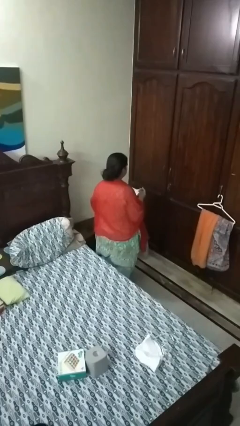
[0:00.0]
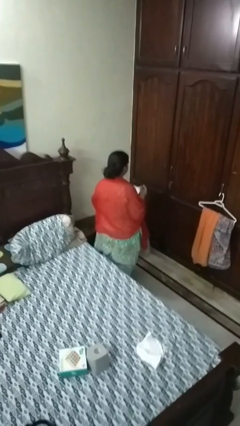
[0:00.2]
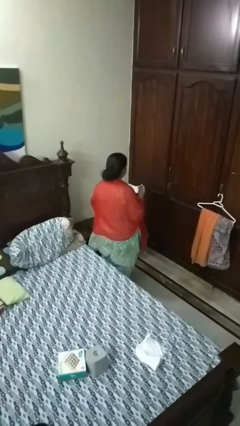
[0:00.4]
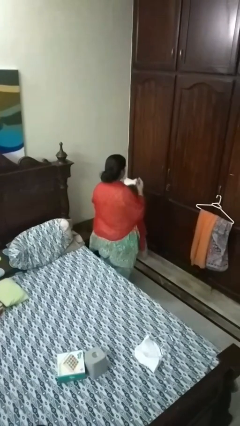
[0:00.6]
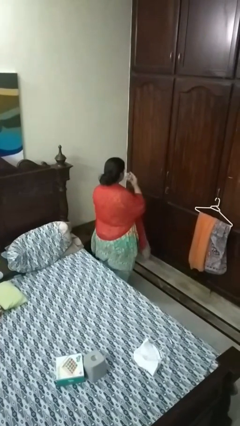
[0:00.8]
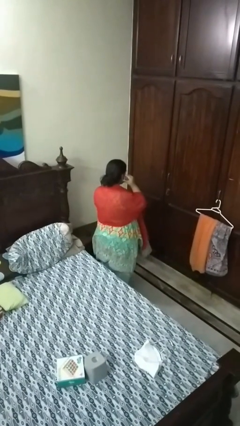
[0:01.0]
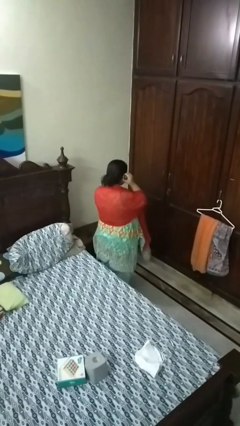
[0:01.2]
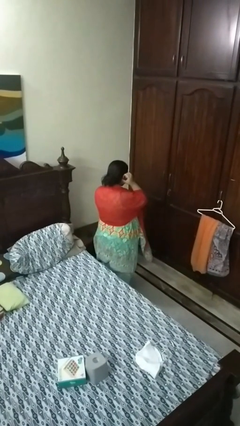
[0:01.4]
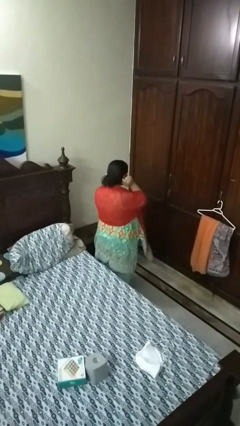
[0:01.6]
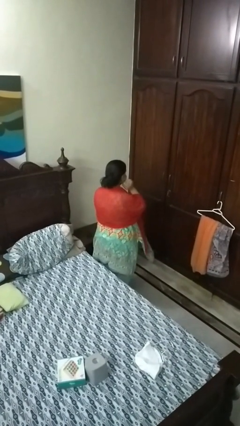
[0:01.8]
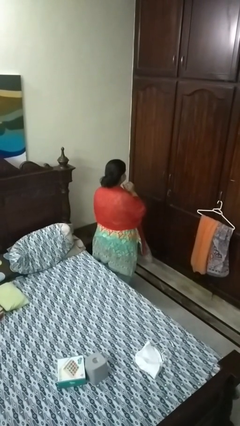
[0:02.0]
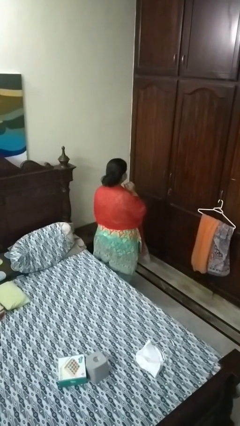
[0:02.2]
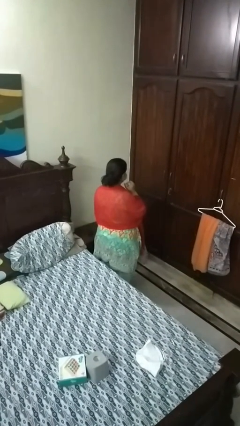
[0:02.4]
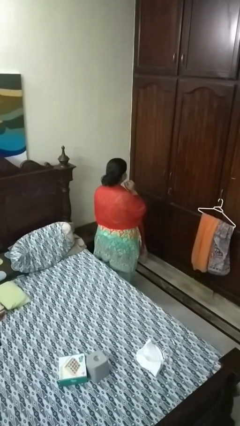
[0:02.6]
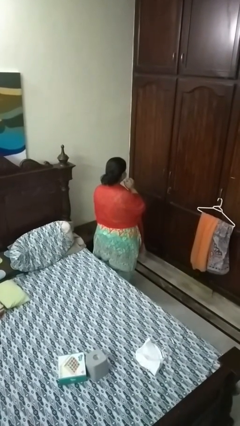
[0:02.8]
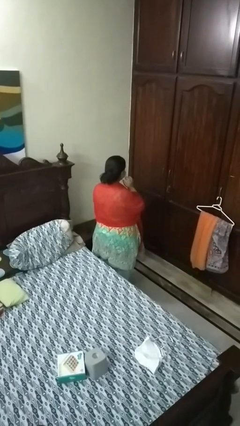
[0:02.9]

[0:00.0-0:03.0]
person puts on facemask

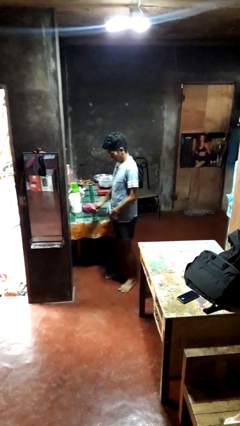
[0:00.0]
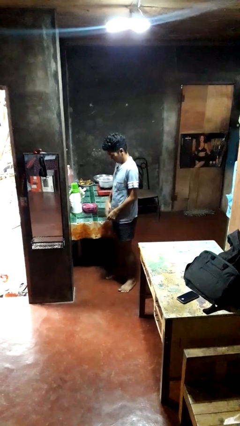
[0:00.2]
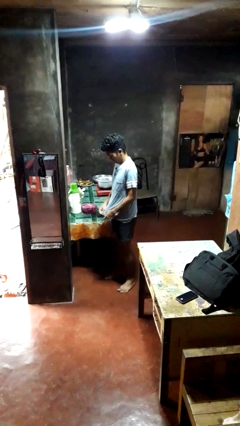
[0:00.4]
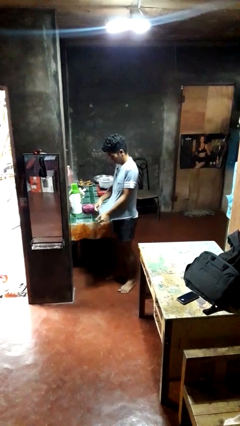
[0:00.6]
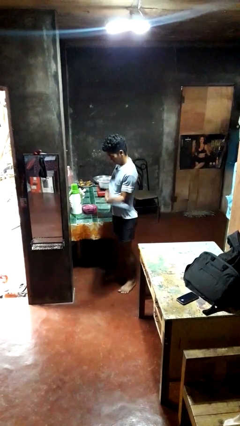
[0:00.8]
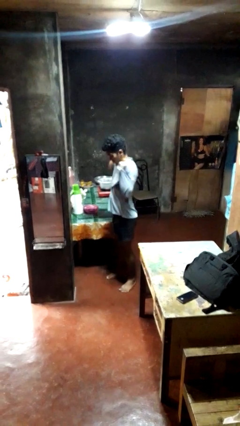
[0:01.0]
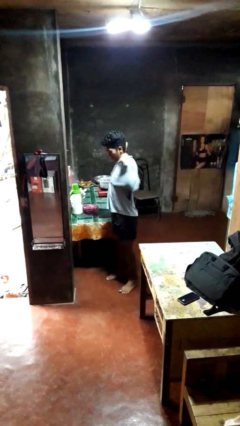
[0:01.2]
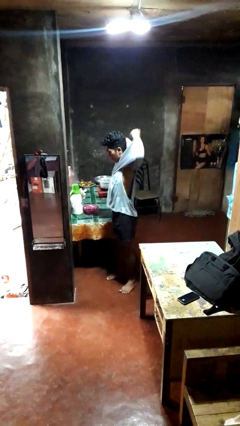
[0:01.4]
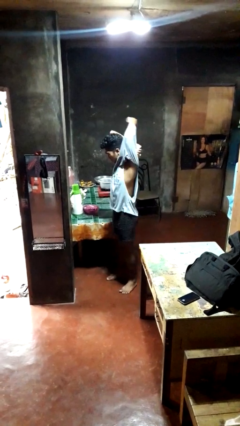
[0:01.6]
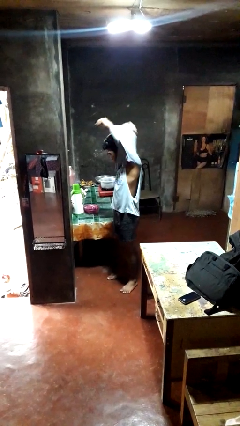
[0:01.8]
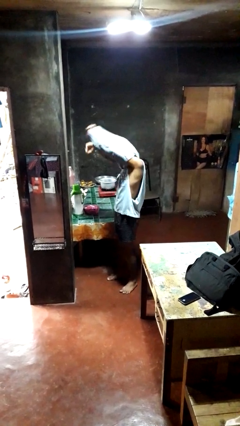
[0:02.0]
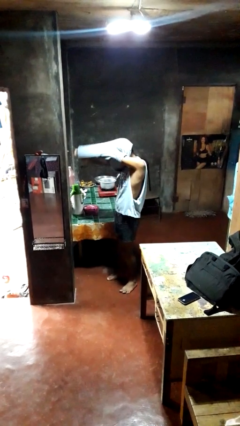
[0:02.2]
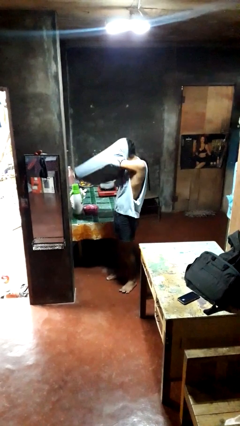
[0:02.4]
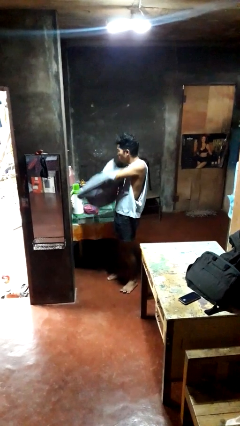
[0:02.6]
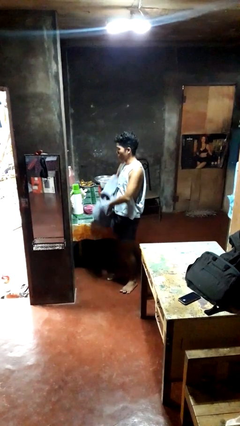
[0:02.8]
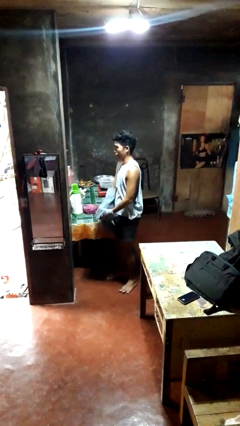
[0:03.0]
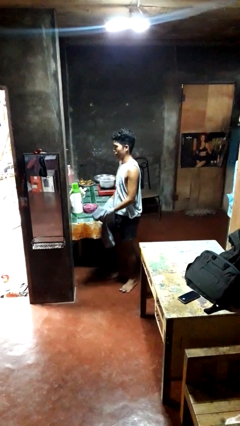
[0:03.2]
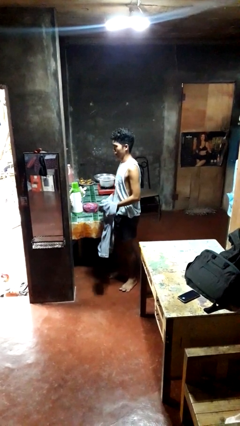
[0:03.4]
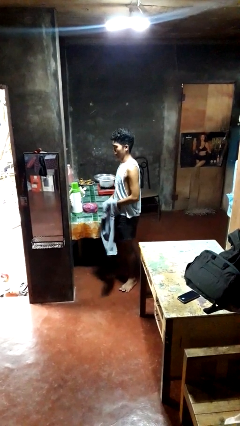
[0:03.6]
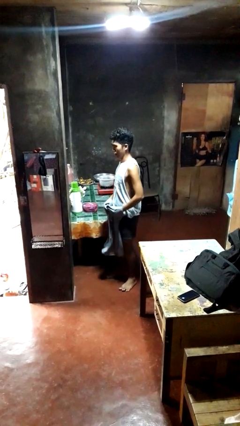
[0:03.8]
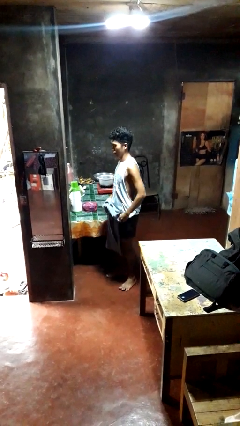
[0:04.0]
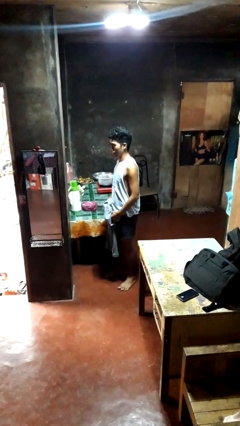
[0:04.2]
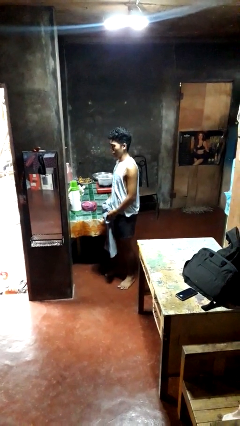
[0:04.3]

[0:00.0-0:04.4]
person takes off shirt

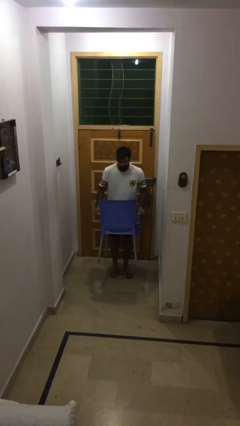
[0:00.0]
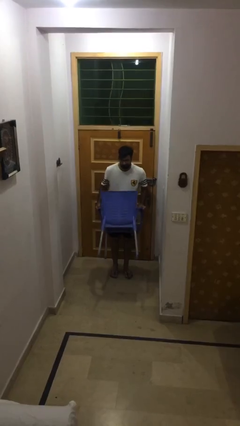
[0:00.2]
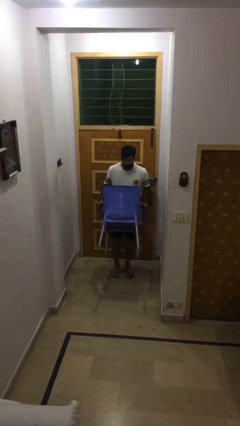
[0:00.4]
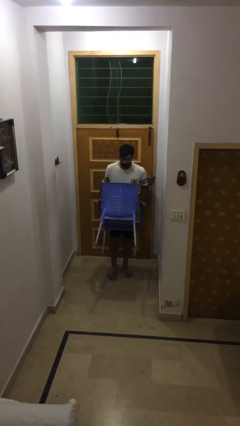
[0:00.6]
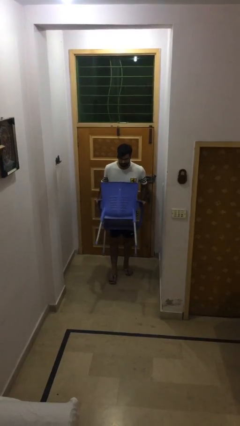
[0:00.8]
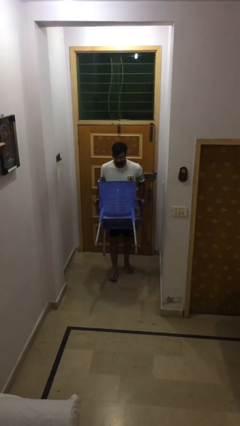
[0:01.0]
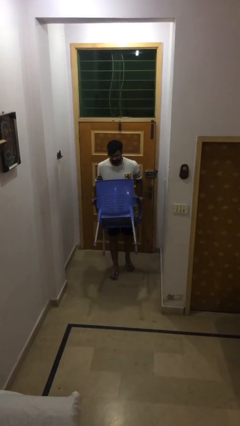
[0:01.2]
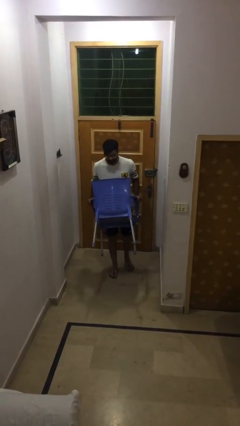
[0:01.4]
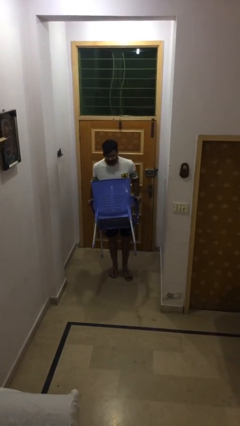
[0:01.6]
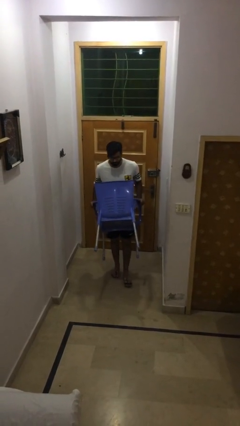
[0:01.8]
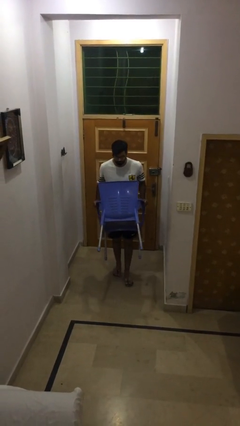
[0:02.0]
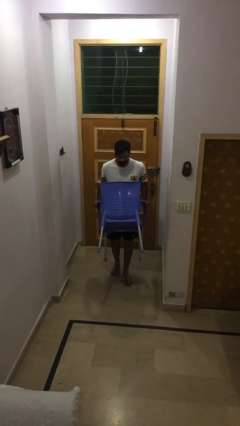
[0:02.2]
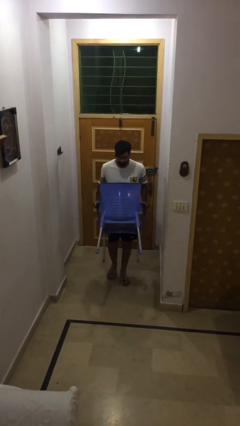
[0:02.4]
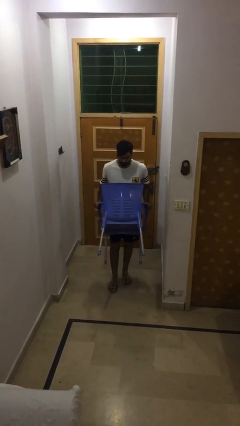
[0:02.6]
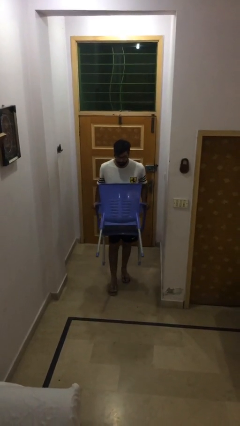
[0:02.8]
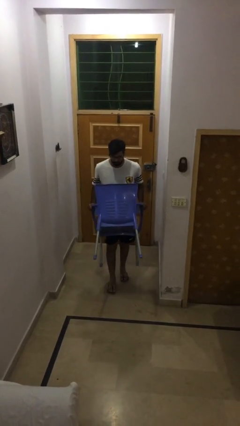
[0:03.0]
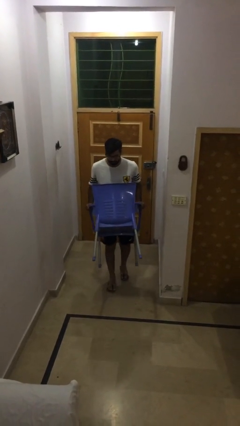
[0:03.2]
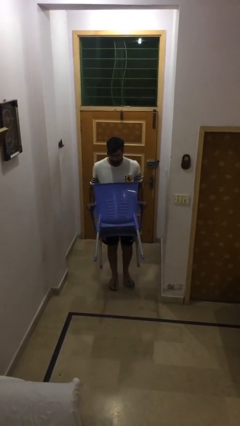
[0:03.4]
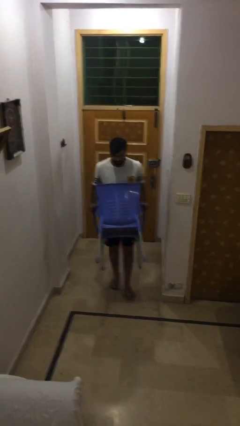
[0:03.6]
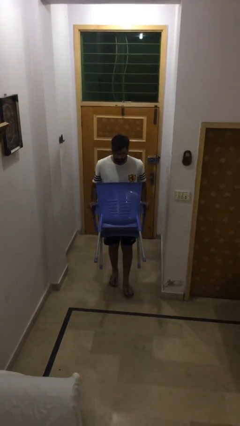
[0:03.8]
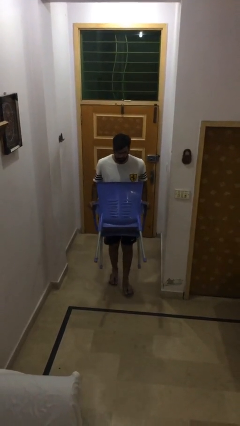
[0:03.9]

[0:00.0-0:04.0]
person carries heavy object

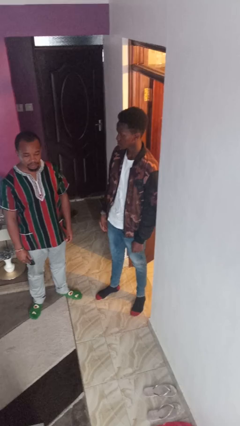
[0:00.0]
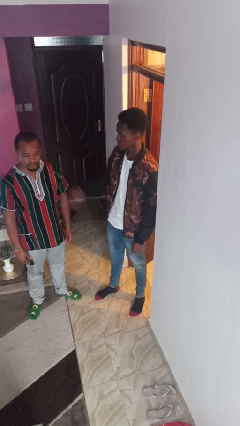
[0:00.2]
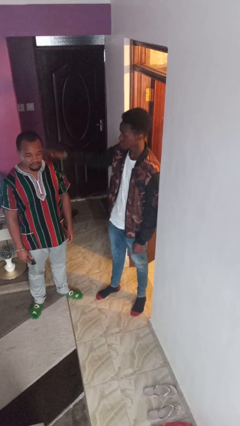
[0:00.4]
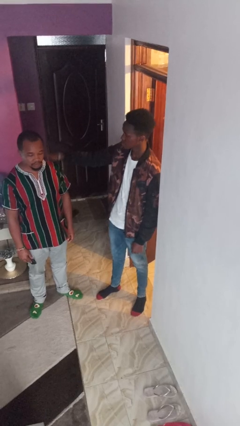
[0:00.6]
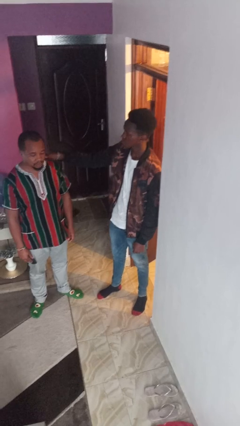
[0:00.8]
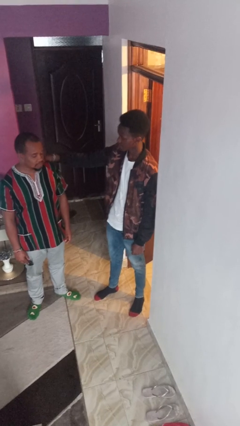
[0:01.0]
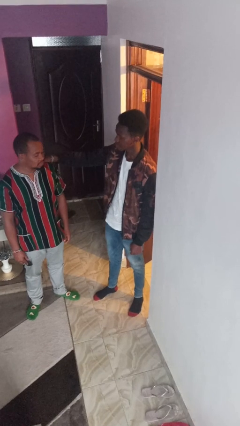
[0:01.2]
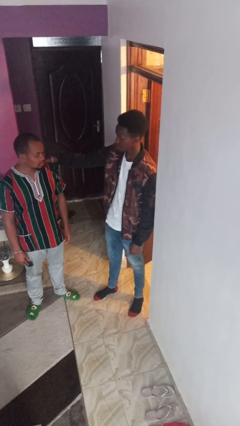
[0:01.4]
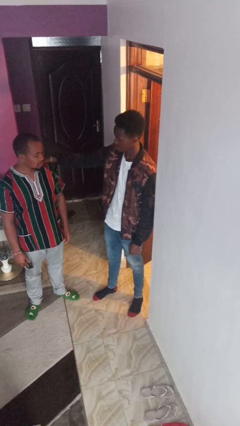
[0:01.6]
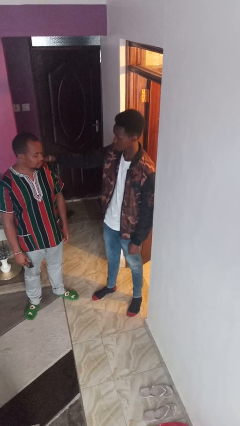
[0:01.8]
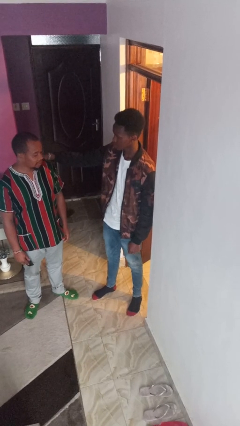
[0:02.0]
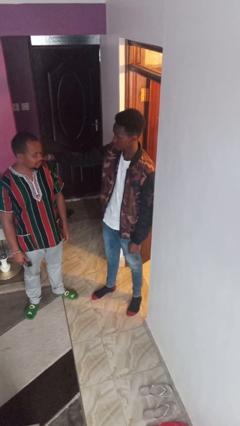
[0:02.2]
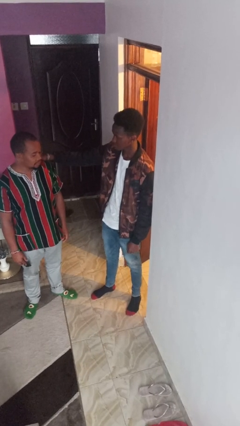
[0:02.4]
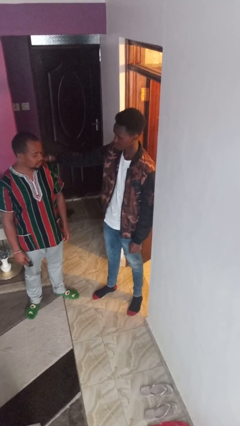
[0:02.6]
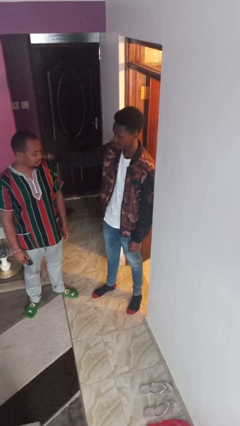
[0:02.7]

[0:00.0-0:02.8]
person pounds shoulders of person

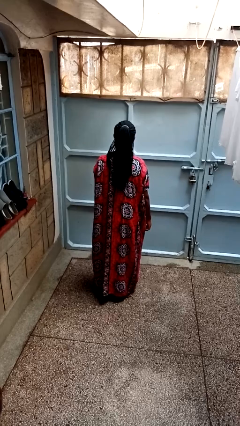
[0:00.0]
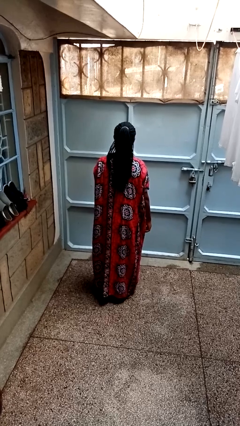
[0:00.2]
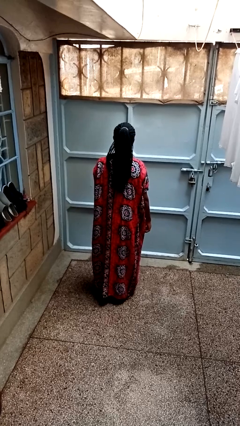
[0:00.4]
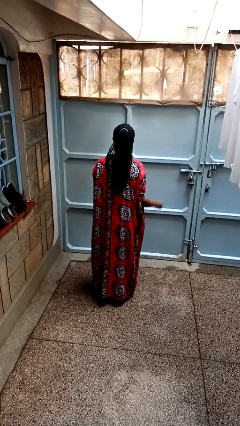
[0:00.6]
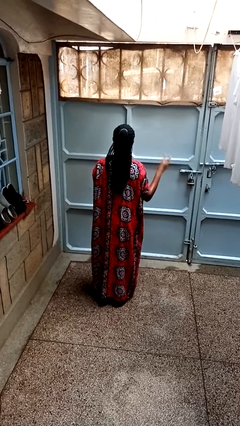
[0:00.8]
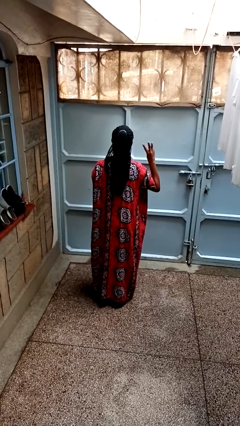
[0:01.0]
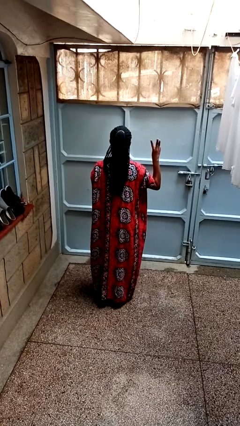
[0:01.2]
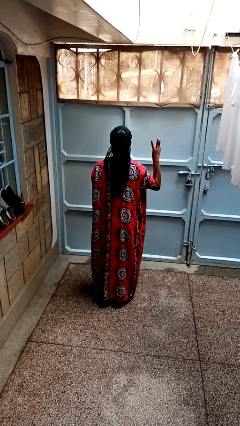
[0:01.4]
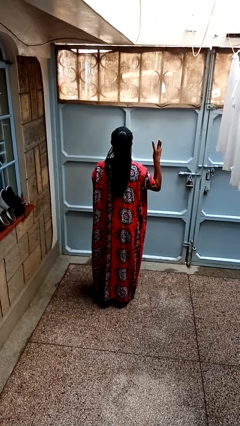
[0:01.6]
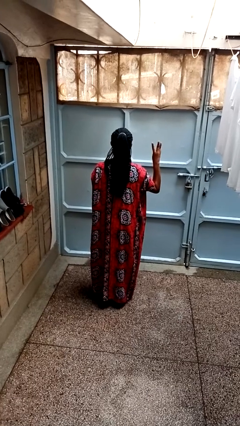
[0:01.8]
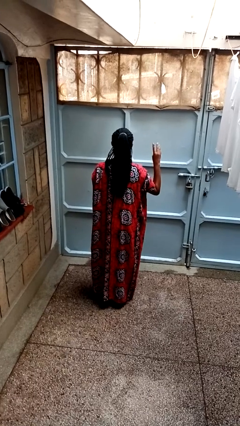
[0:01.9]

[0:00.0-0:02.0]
person gestures number three

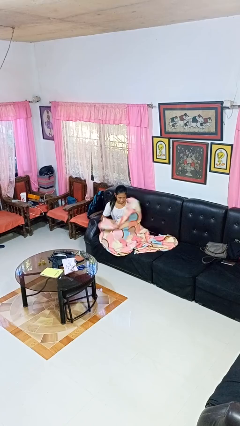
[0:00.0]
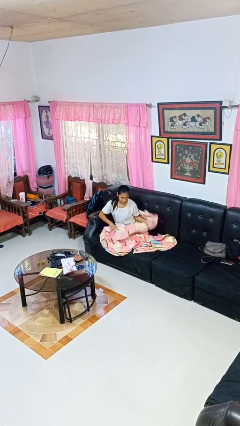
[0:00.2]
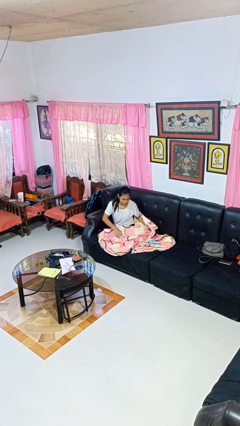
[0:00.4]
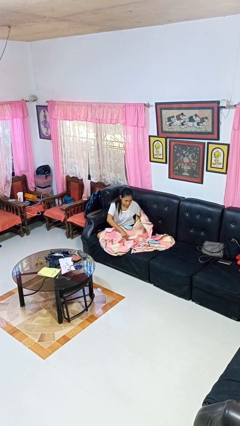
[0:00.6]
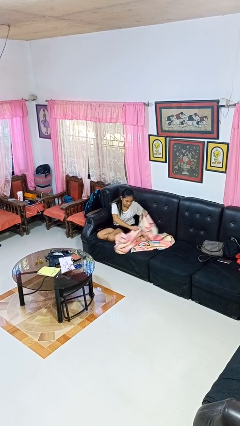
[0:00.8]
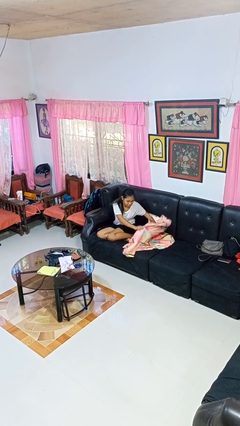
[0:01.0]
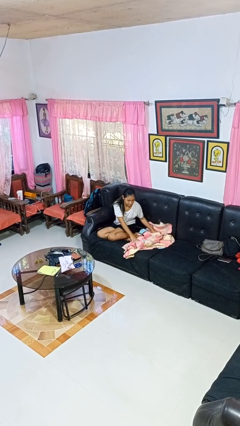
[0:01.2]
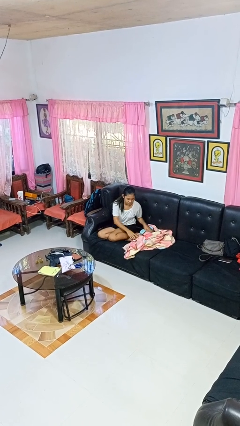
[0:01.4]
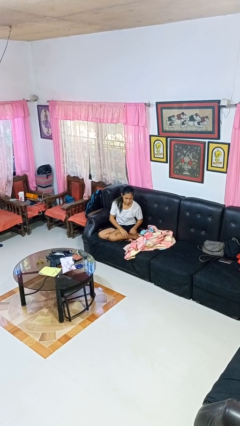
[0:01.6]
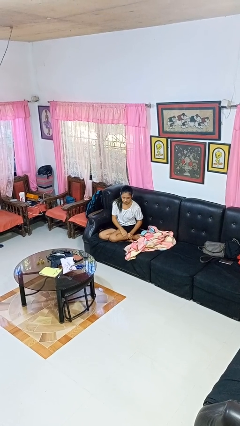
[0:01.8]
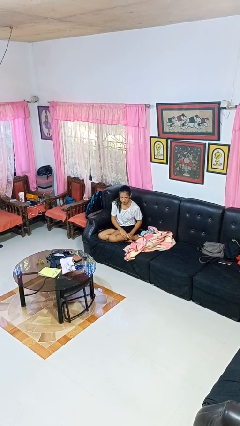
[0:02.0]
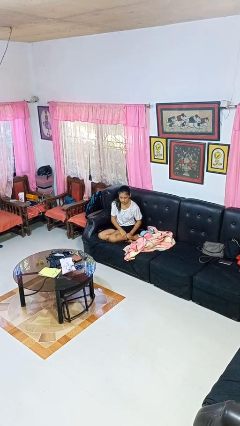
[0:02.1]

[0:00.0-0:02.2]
person uncovers with blanket
